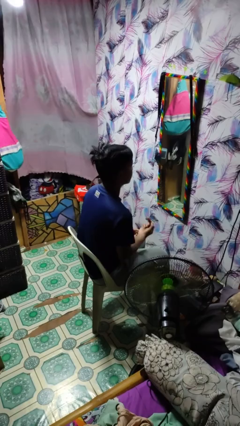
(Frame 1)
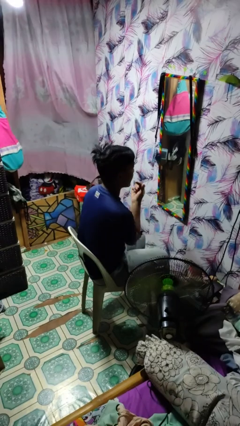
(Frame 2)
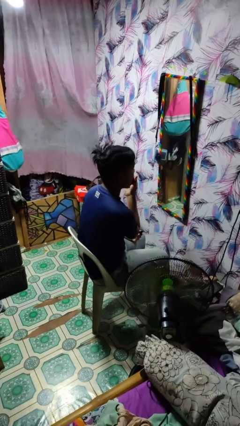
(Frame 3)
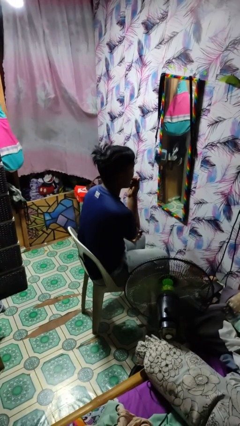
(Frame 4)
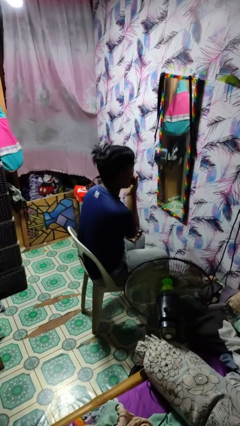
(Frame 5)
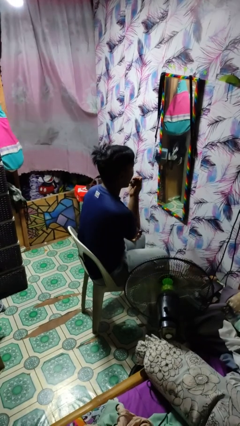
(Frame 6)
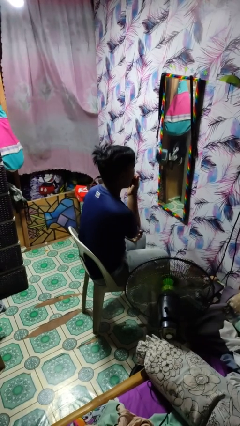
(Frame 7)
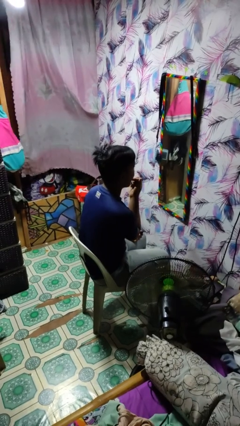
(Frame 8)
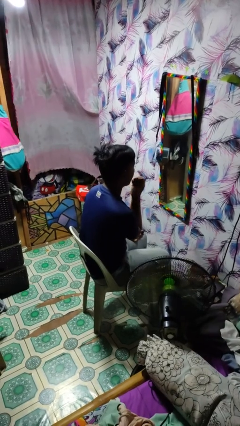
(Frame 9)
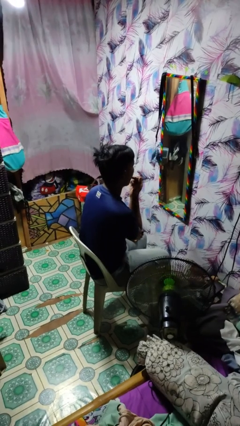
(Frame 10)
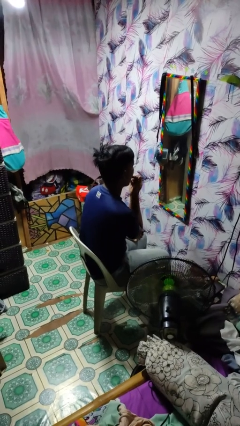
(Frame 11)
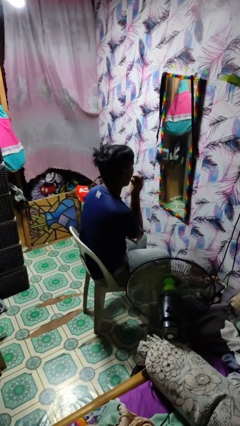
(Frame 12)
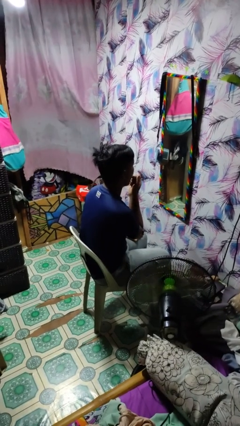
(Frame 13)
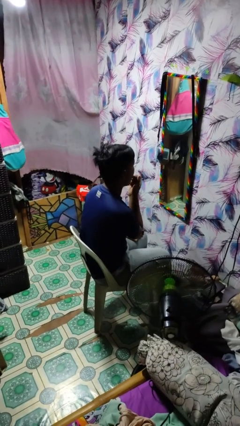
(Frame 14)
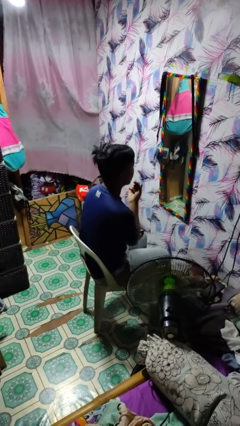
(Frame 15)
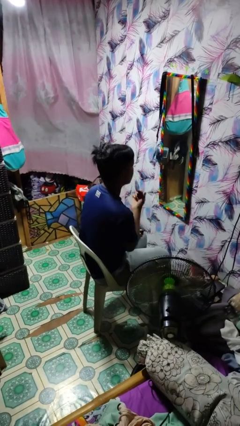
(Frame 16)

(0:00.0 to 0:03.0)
person applies lip makeup

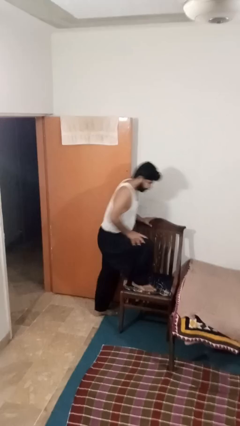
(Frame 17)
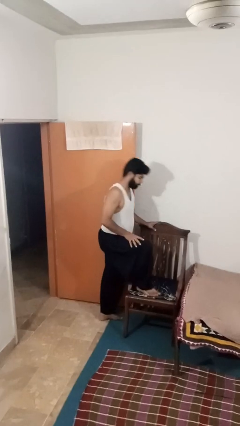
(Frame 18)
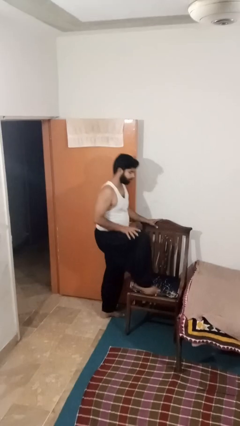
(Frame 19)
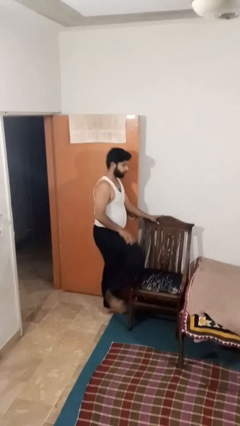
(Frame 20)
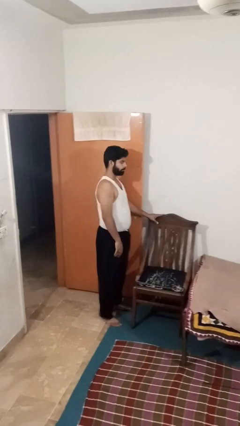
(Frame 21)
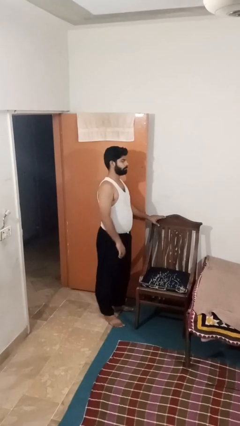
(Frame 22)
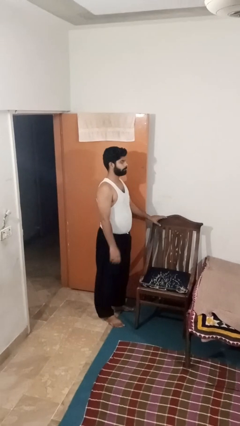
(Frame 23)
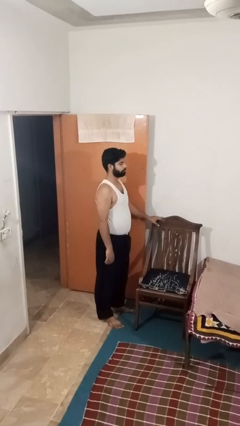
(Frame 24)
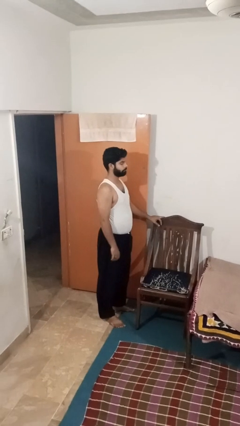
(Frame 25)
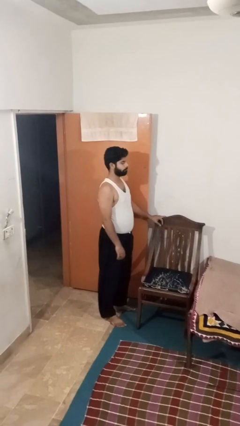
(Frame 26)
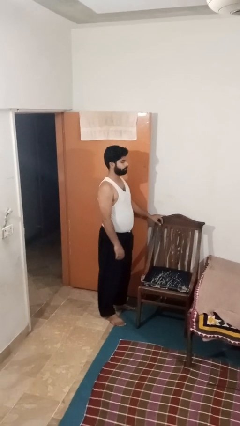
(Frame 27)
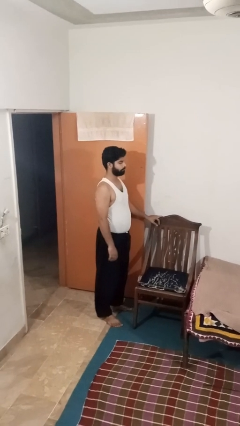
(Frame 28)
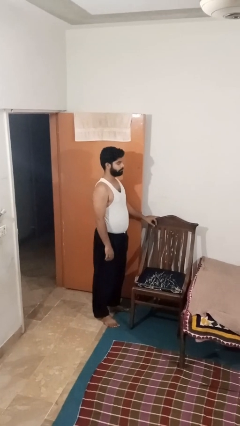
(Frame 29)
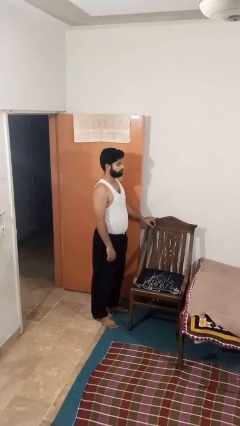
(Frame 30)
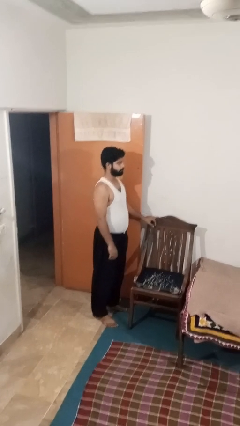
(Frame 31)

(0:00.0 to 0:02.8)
person climbs off chair

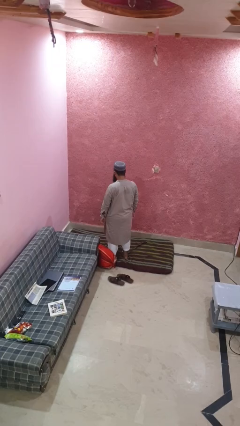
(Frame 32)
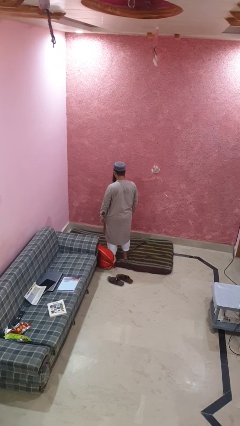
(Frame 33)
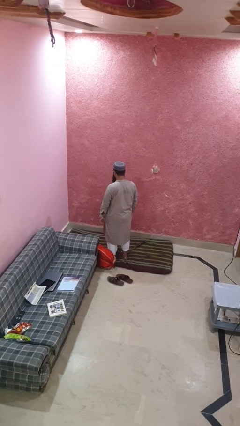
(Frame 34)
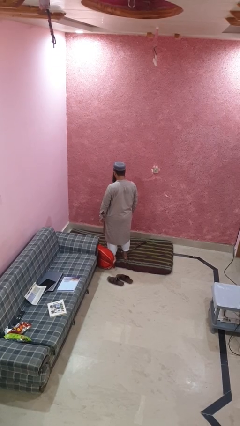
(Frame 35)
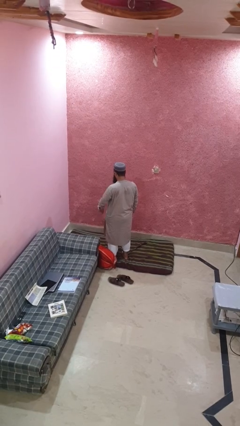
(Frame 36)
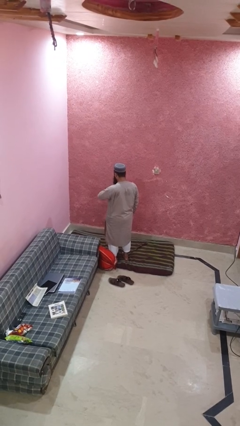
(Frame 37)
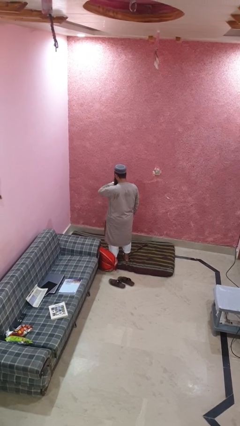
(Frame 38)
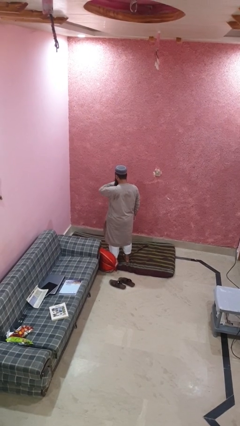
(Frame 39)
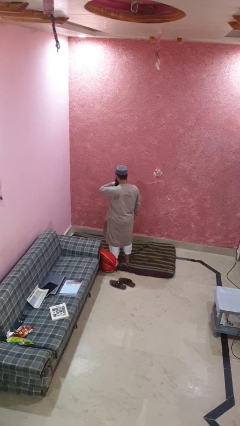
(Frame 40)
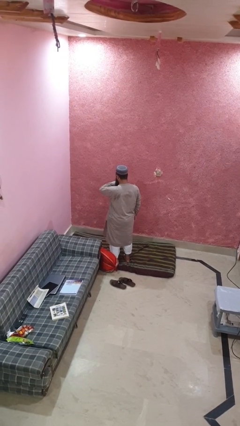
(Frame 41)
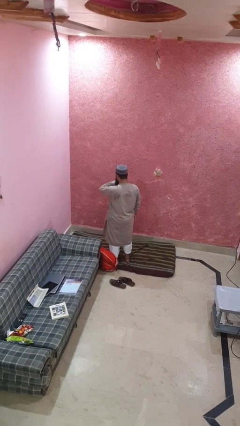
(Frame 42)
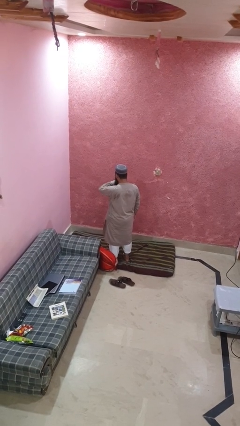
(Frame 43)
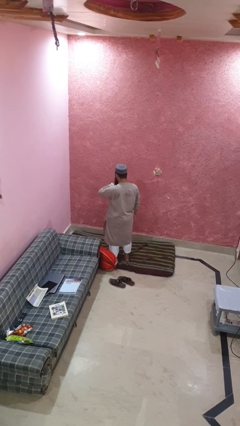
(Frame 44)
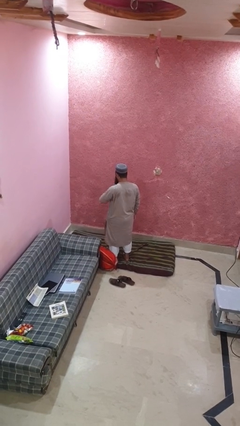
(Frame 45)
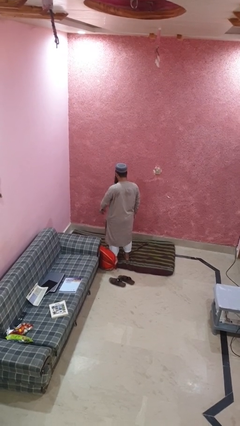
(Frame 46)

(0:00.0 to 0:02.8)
person looks at wristwatch

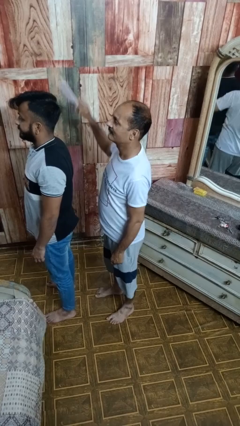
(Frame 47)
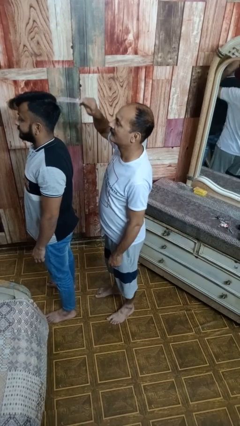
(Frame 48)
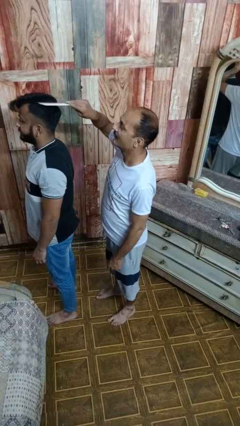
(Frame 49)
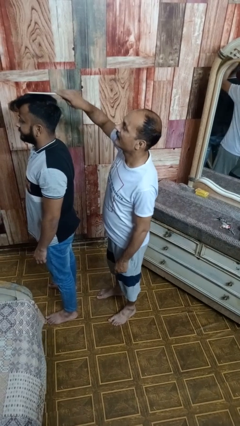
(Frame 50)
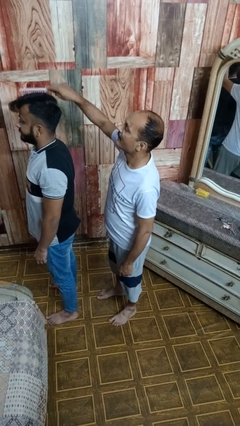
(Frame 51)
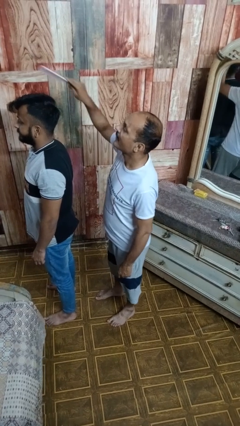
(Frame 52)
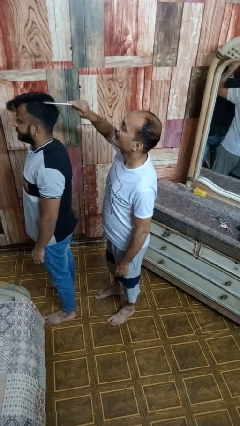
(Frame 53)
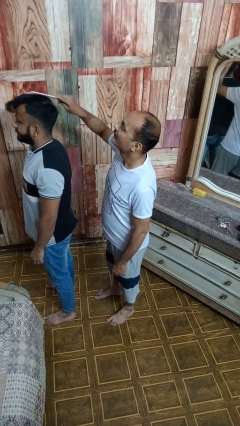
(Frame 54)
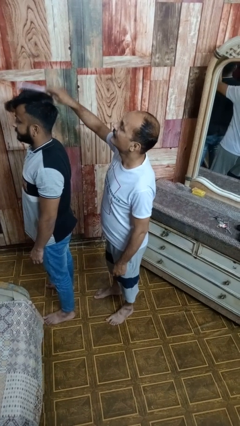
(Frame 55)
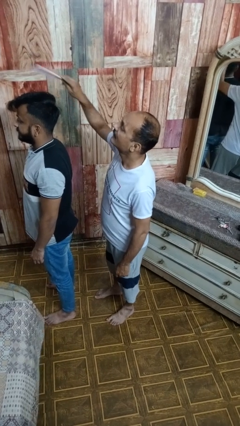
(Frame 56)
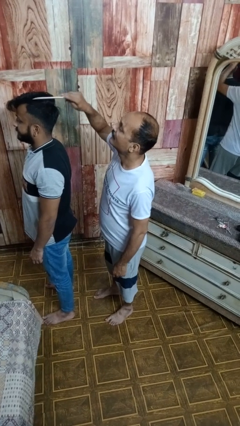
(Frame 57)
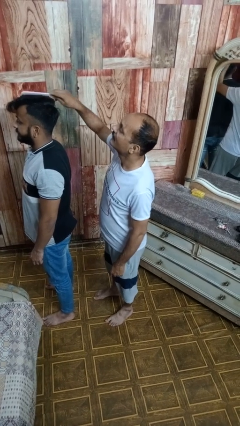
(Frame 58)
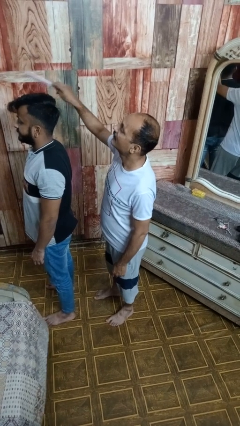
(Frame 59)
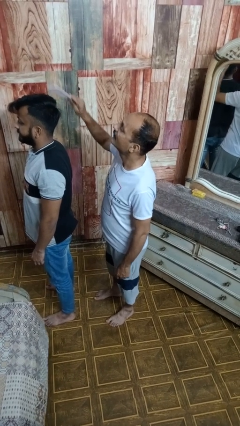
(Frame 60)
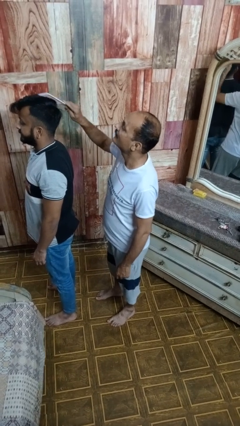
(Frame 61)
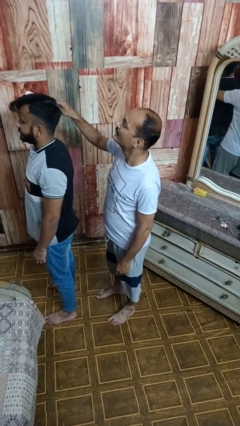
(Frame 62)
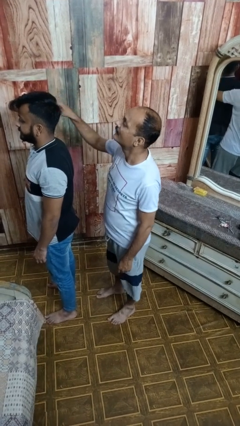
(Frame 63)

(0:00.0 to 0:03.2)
person brushes hair of person

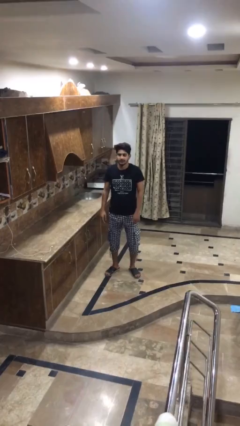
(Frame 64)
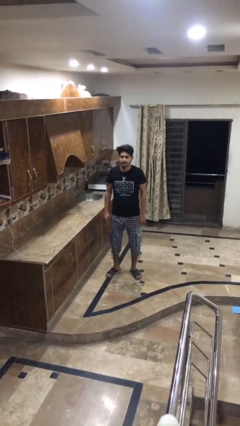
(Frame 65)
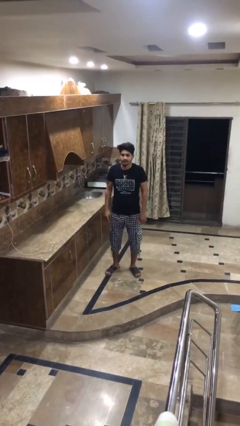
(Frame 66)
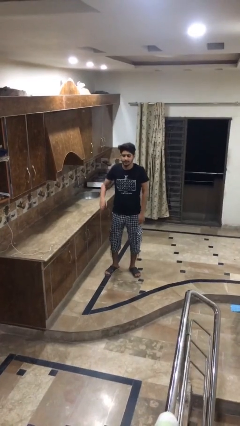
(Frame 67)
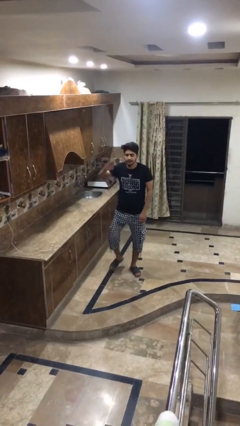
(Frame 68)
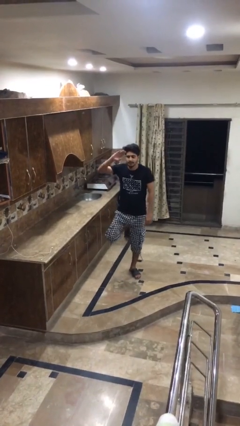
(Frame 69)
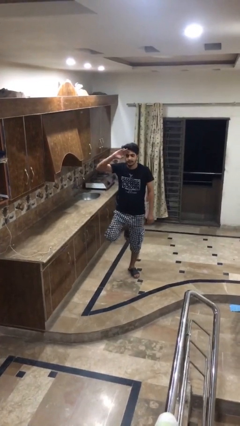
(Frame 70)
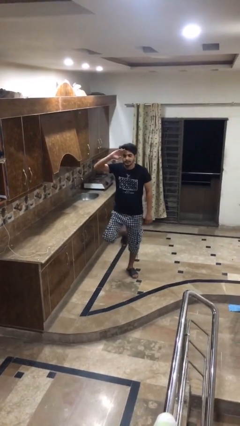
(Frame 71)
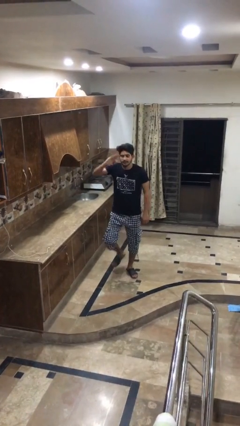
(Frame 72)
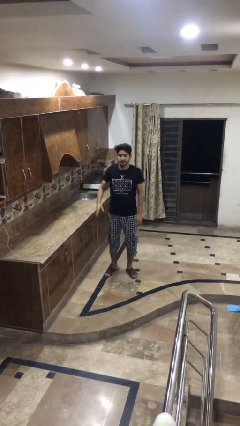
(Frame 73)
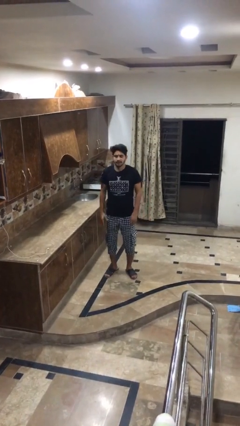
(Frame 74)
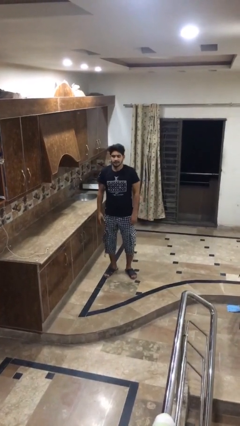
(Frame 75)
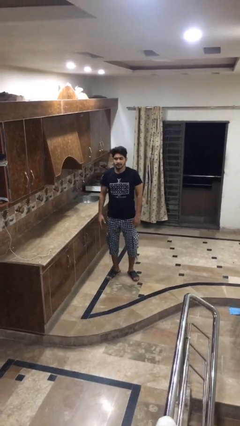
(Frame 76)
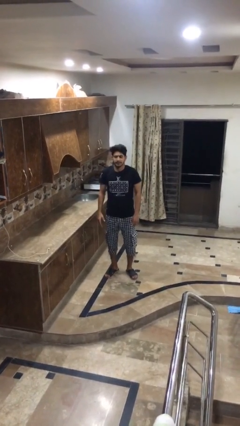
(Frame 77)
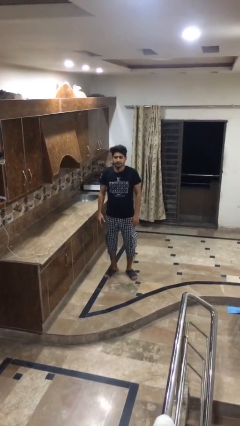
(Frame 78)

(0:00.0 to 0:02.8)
person salutes

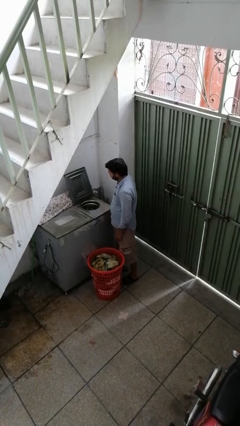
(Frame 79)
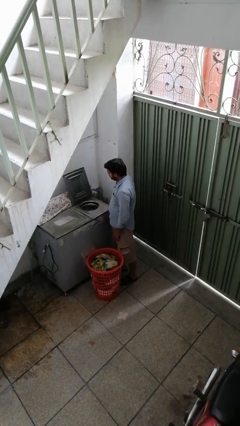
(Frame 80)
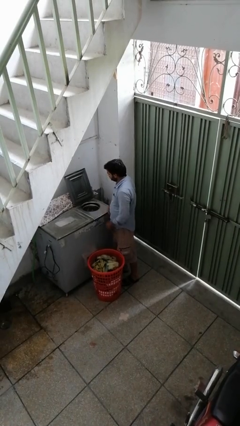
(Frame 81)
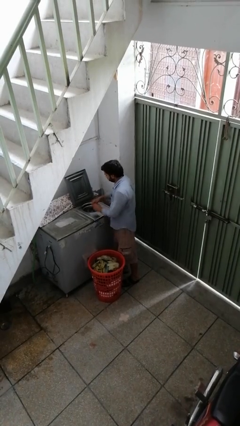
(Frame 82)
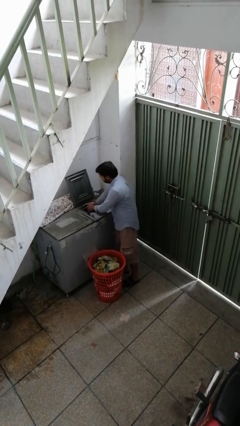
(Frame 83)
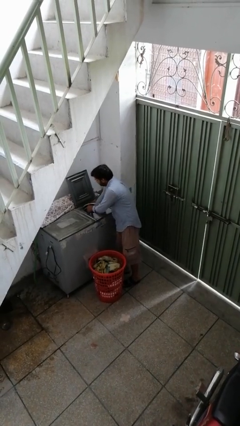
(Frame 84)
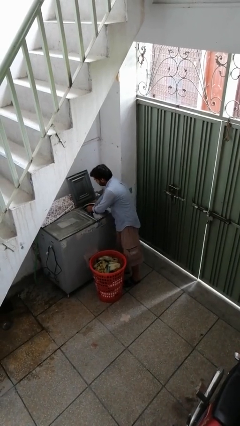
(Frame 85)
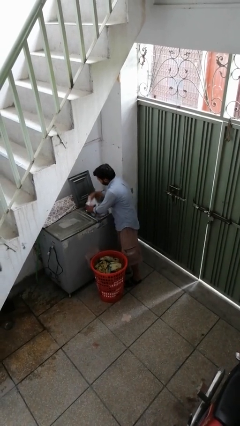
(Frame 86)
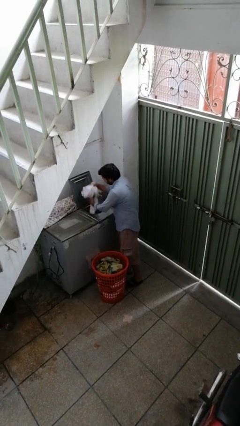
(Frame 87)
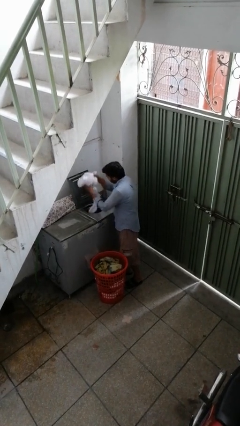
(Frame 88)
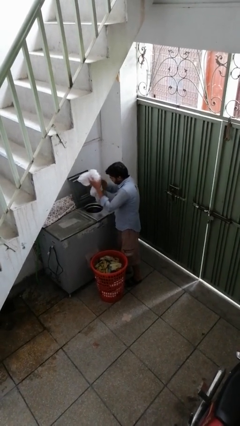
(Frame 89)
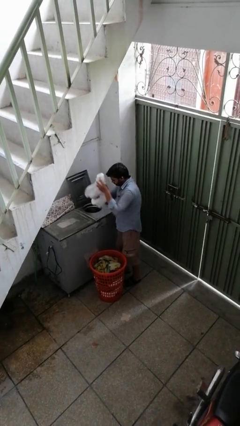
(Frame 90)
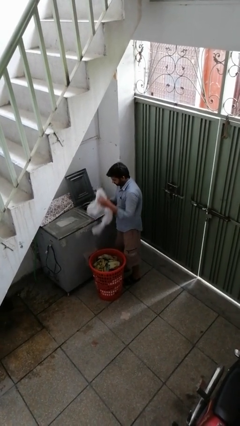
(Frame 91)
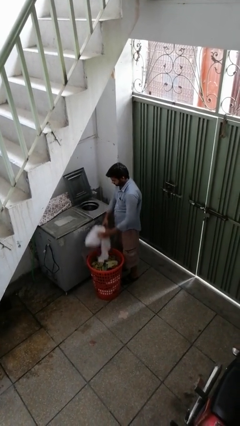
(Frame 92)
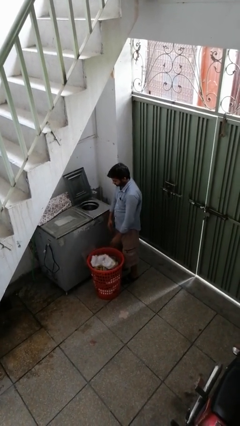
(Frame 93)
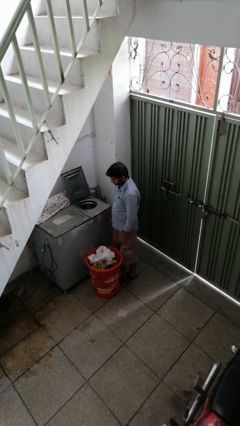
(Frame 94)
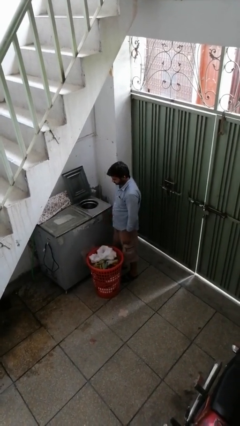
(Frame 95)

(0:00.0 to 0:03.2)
person unloads dryer
